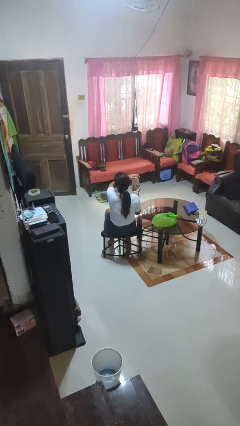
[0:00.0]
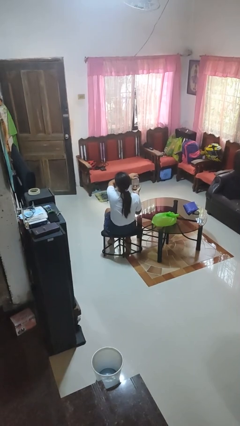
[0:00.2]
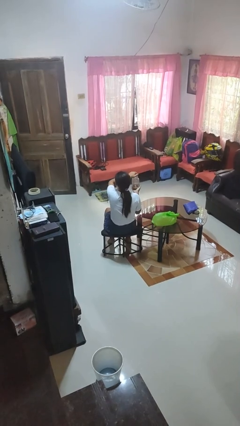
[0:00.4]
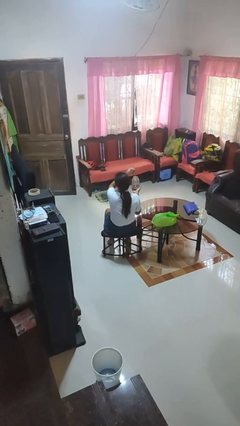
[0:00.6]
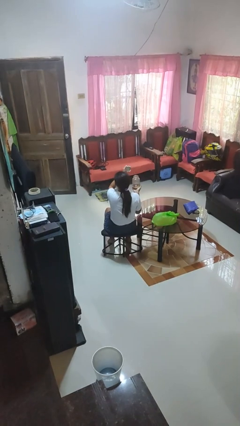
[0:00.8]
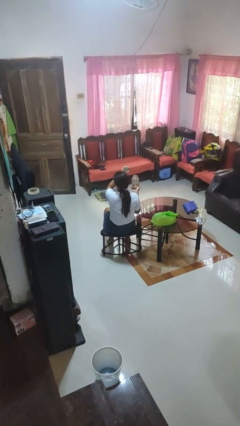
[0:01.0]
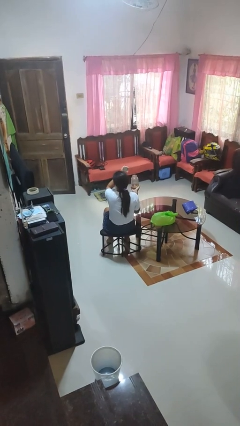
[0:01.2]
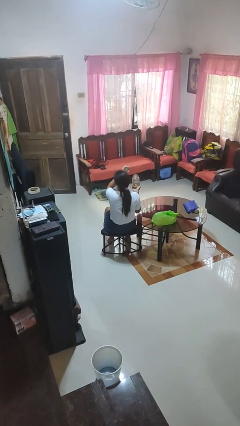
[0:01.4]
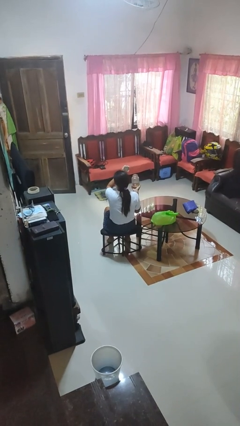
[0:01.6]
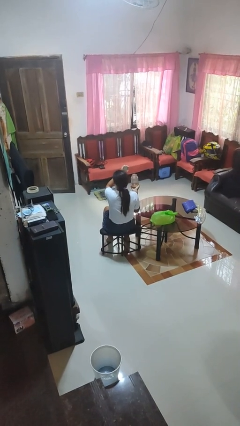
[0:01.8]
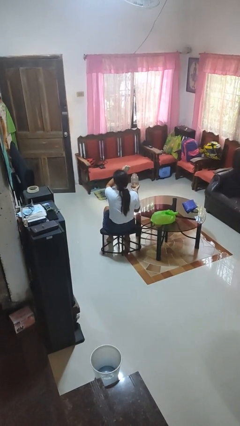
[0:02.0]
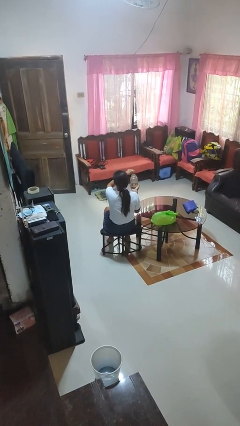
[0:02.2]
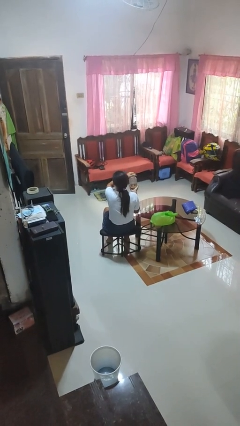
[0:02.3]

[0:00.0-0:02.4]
person opens jar

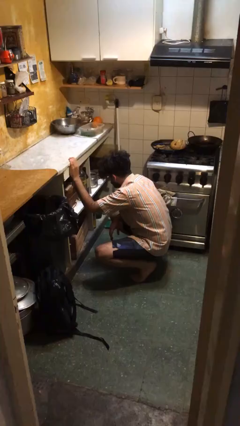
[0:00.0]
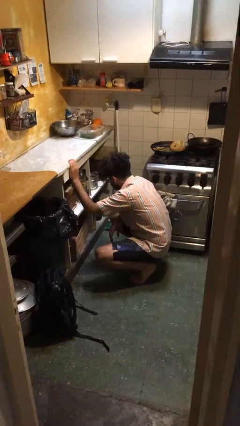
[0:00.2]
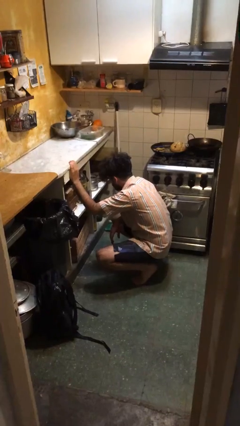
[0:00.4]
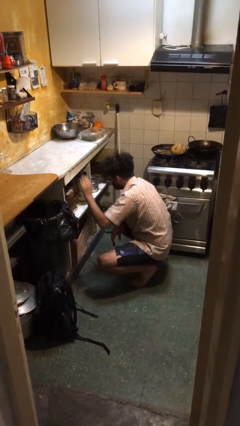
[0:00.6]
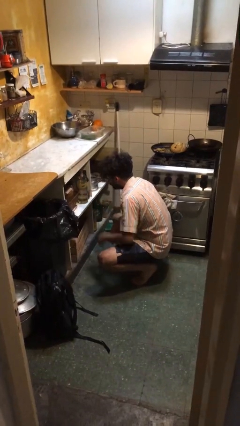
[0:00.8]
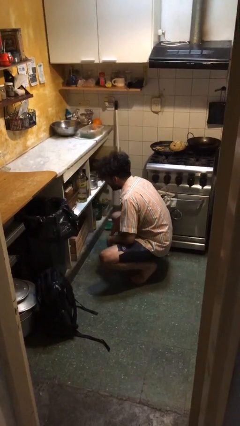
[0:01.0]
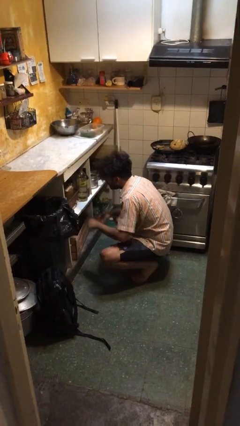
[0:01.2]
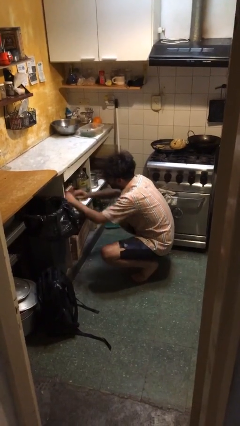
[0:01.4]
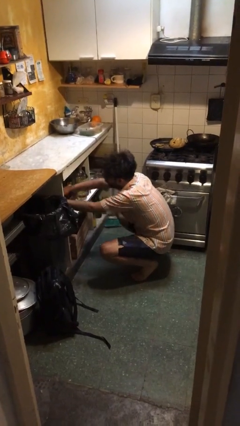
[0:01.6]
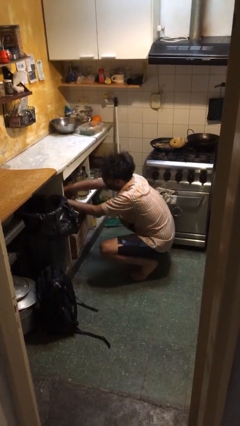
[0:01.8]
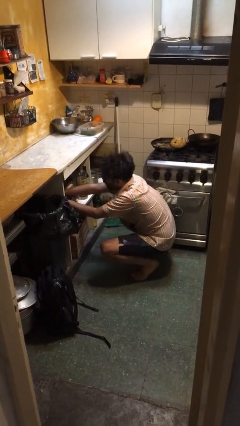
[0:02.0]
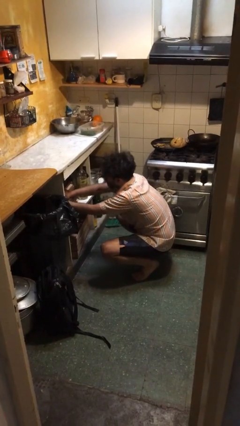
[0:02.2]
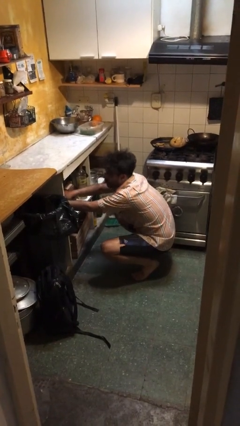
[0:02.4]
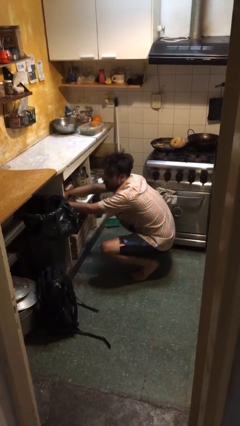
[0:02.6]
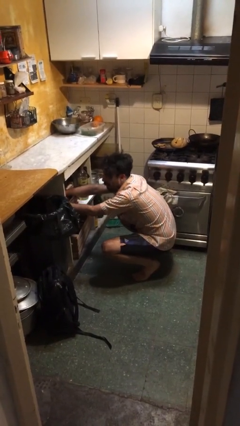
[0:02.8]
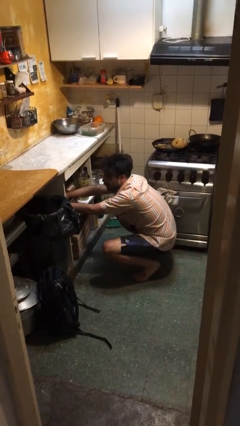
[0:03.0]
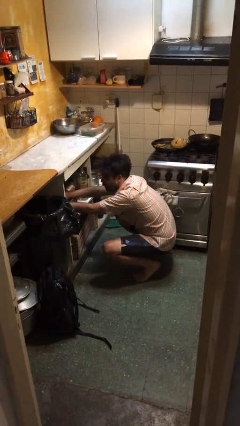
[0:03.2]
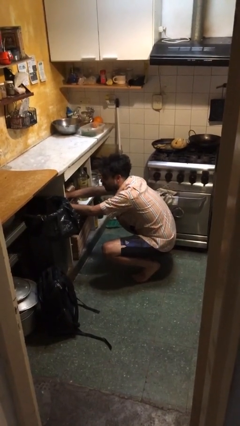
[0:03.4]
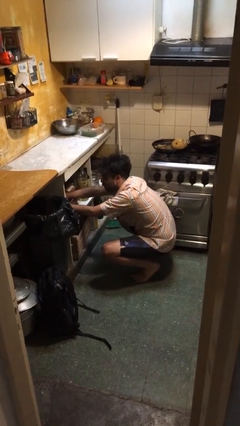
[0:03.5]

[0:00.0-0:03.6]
person searches in cabinet

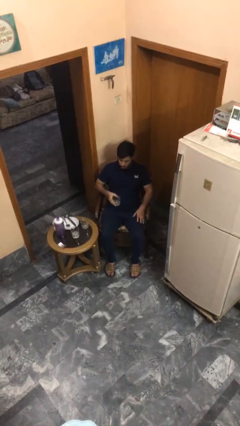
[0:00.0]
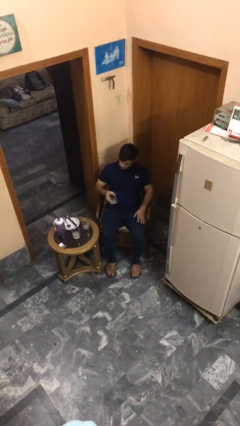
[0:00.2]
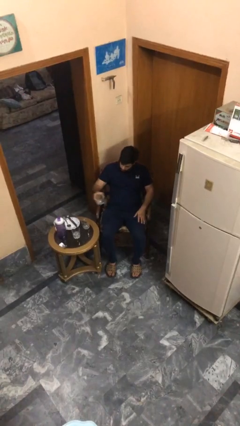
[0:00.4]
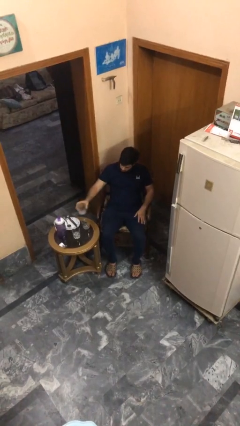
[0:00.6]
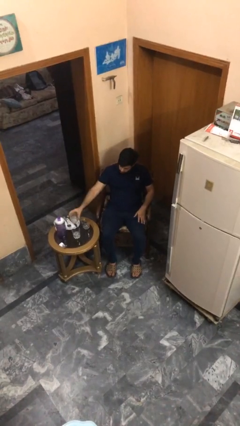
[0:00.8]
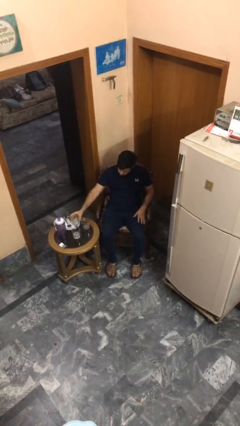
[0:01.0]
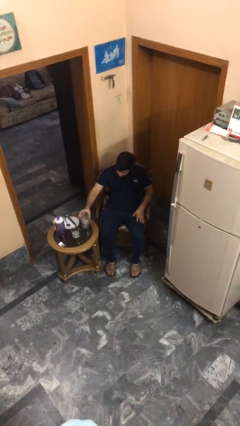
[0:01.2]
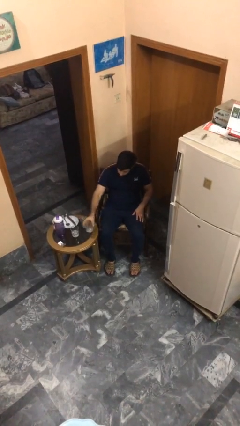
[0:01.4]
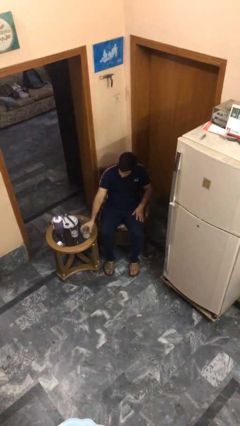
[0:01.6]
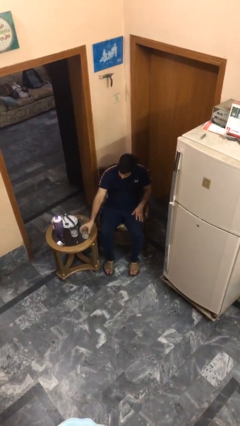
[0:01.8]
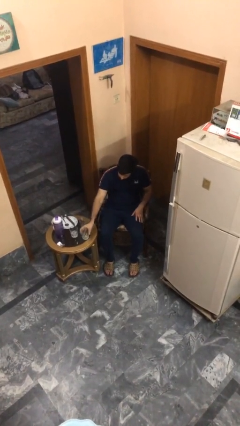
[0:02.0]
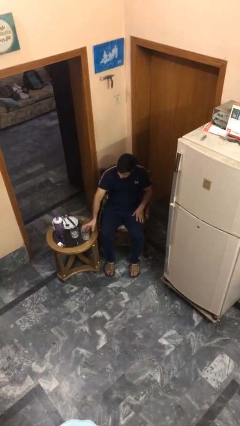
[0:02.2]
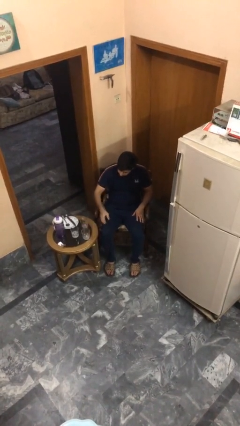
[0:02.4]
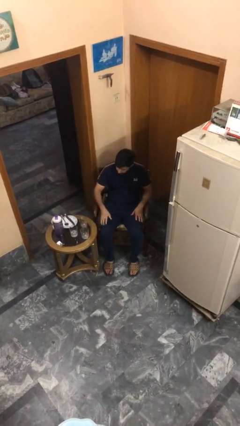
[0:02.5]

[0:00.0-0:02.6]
person puts down object on table

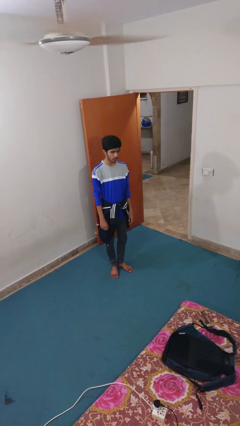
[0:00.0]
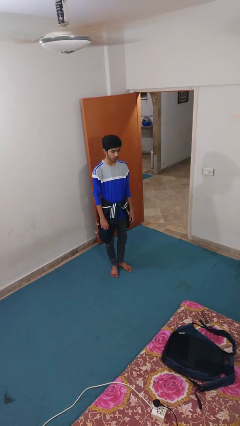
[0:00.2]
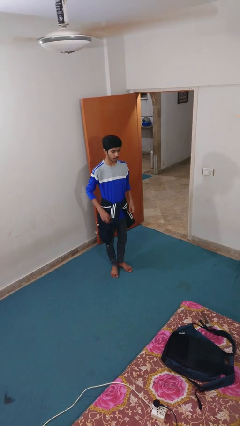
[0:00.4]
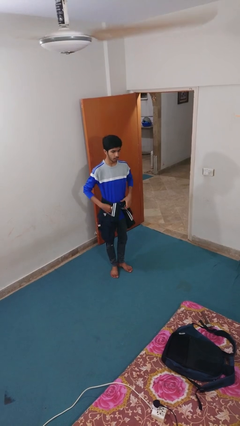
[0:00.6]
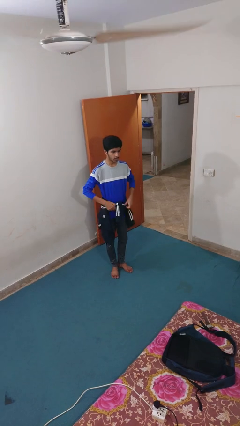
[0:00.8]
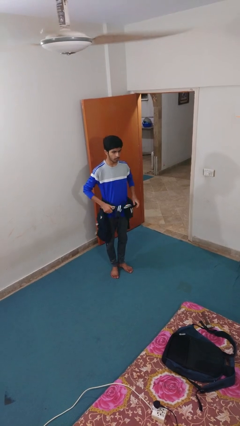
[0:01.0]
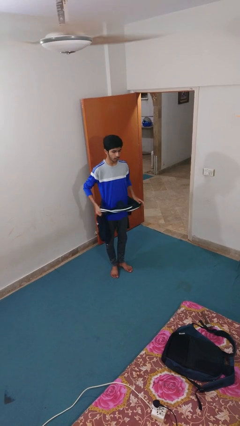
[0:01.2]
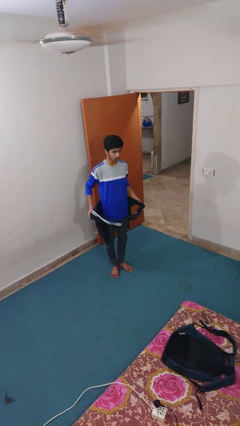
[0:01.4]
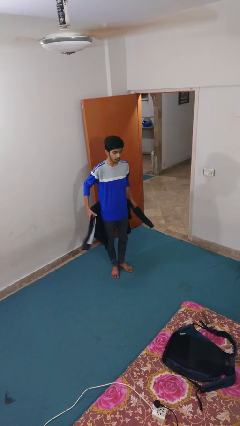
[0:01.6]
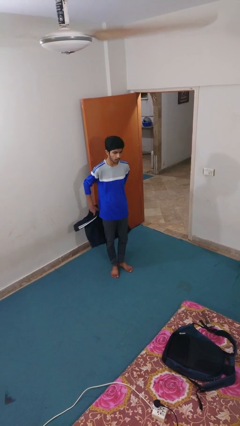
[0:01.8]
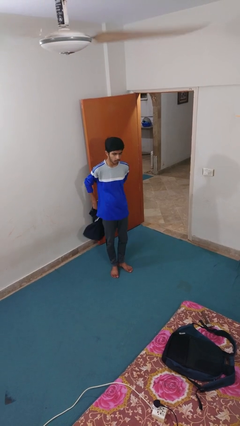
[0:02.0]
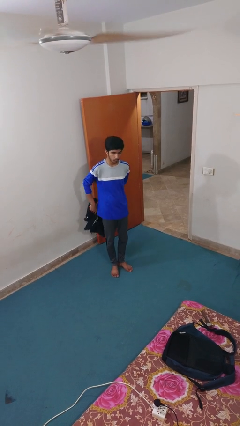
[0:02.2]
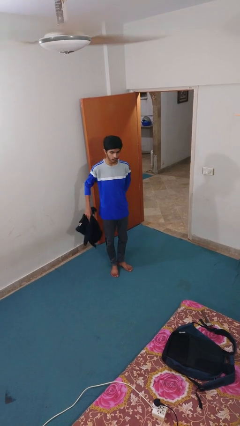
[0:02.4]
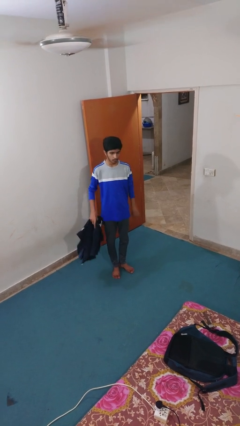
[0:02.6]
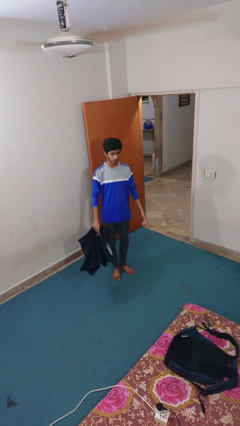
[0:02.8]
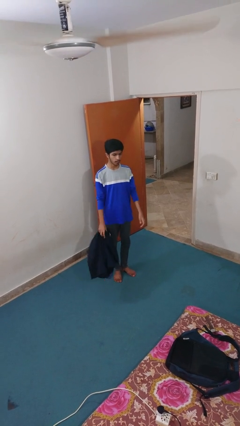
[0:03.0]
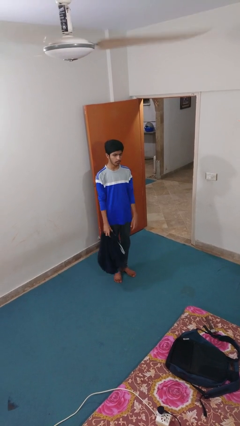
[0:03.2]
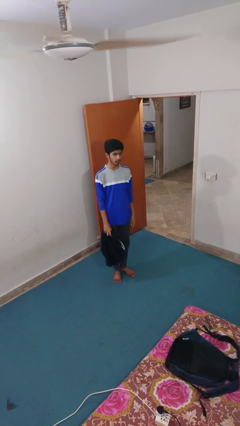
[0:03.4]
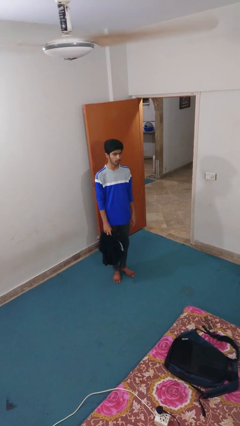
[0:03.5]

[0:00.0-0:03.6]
person unties jacket around waist

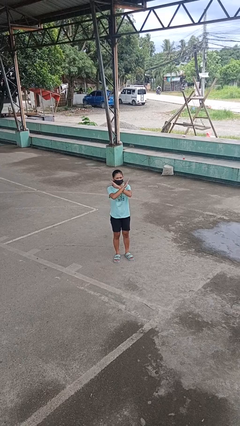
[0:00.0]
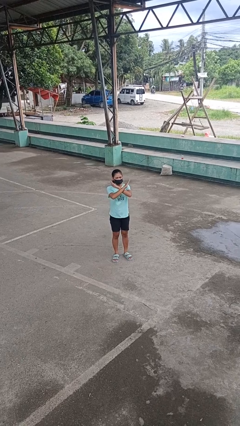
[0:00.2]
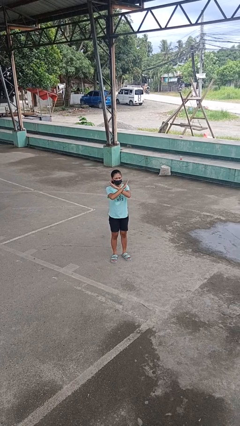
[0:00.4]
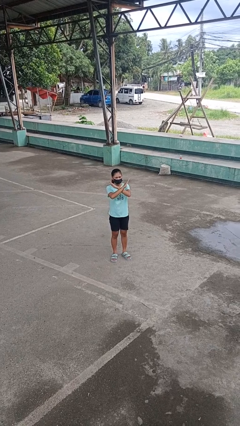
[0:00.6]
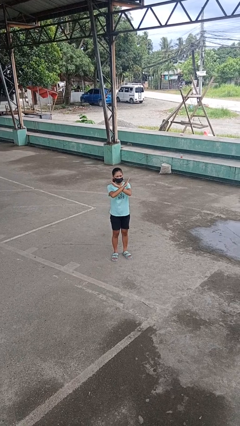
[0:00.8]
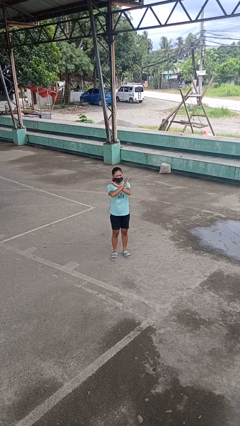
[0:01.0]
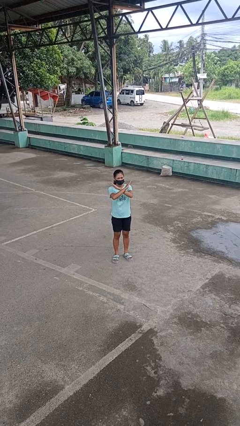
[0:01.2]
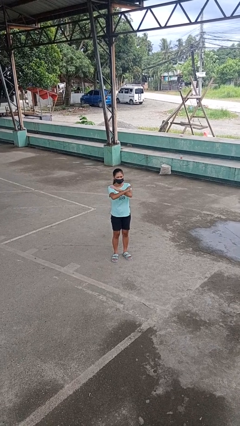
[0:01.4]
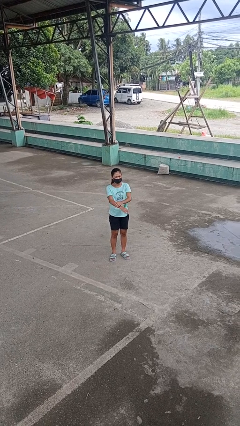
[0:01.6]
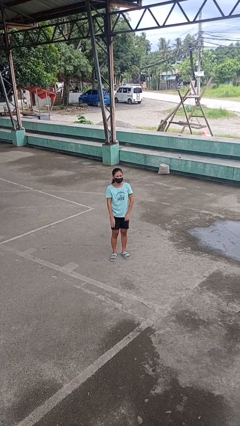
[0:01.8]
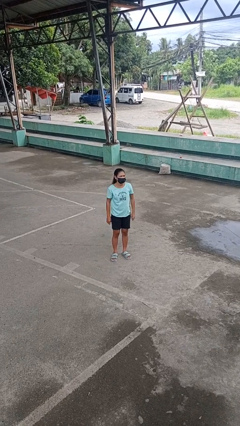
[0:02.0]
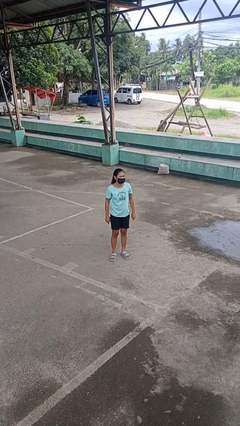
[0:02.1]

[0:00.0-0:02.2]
person gestures arms x

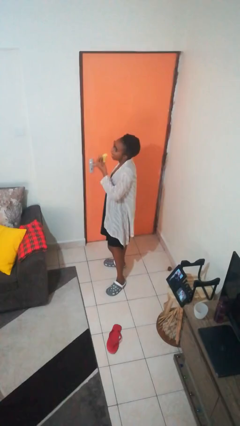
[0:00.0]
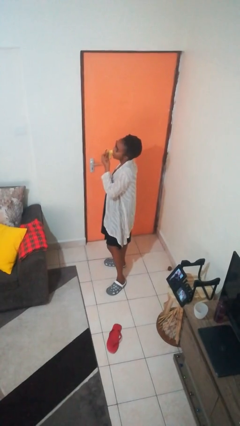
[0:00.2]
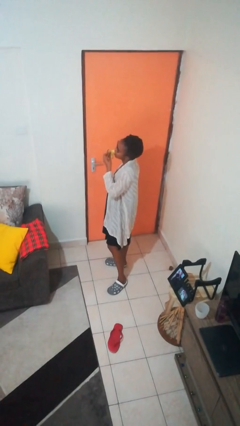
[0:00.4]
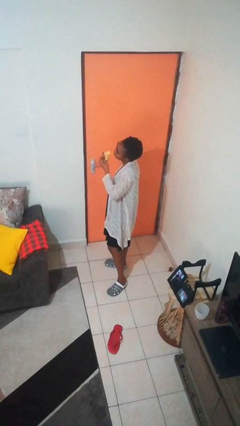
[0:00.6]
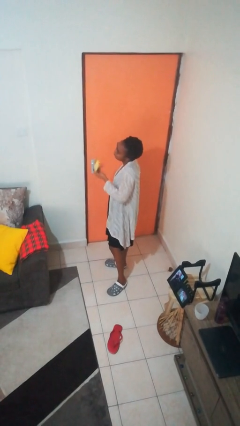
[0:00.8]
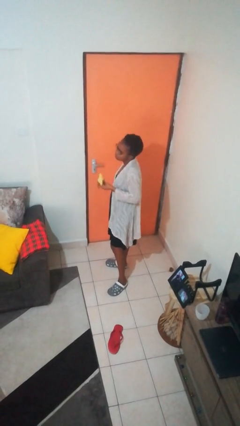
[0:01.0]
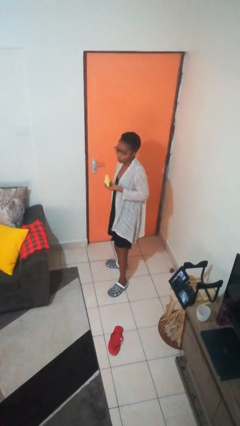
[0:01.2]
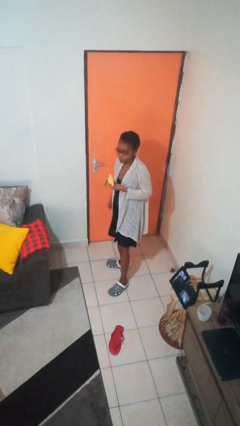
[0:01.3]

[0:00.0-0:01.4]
person eats banana

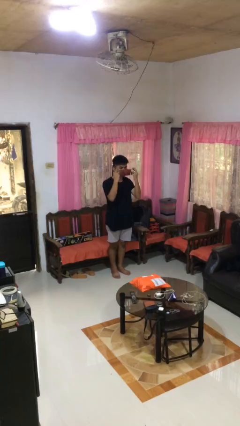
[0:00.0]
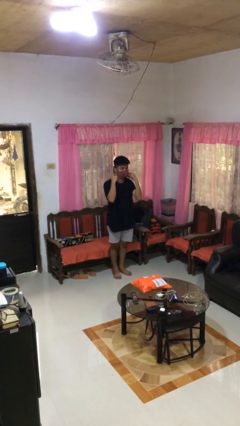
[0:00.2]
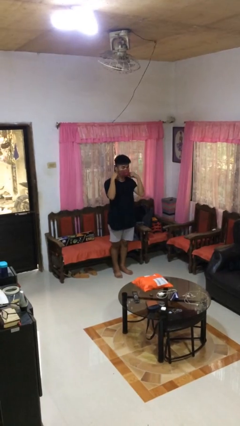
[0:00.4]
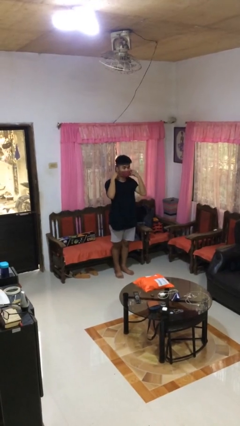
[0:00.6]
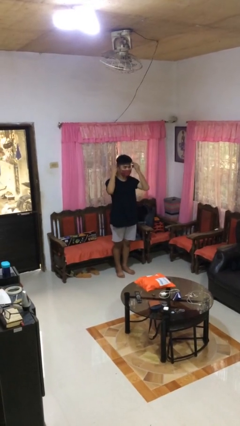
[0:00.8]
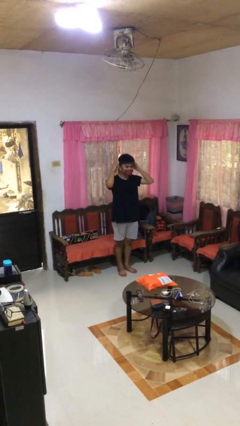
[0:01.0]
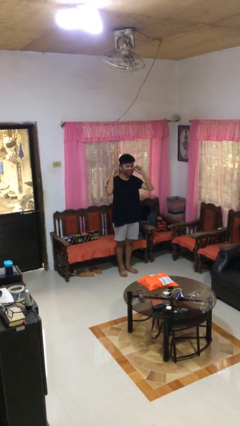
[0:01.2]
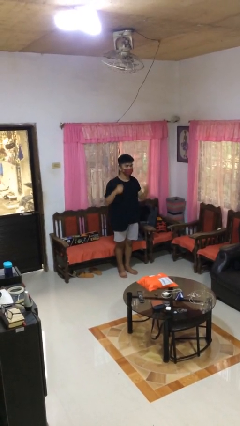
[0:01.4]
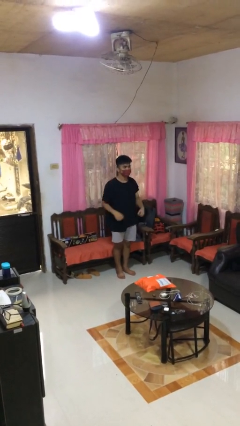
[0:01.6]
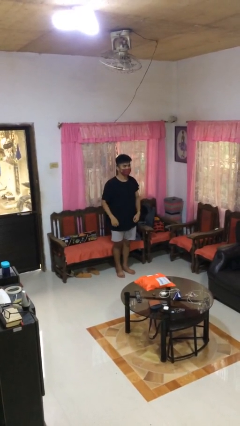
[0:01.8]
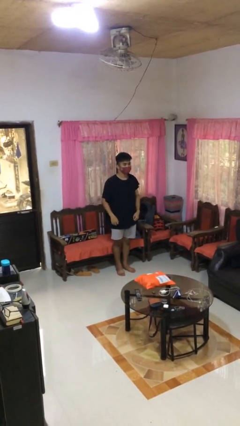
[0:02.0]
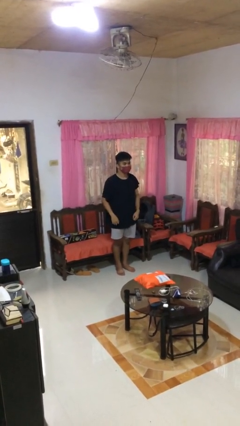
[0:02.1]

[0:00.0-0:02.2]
person puts on facemask
